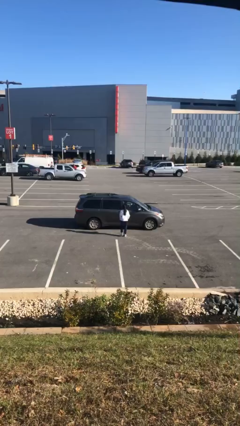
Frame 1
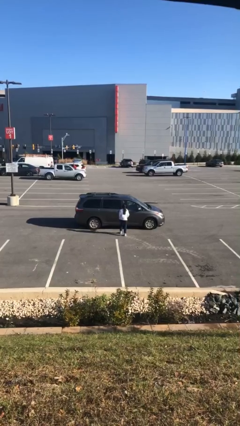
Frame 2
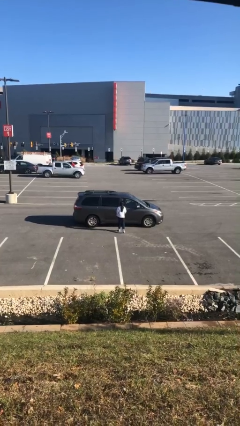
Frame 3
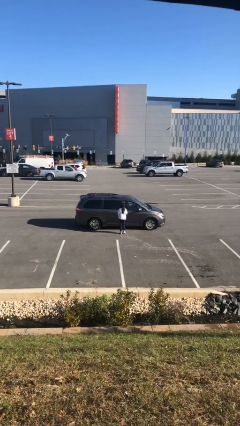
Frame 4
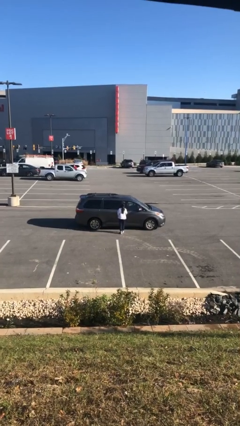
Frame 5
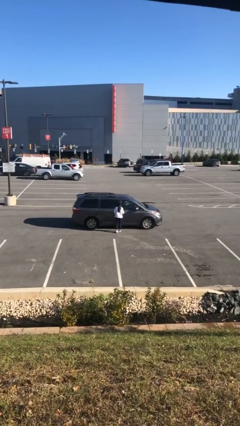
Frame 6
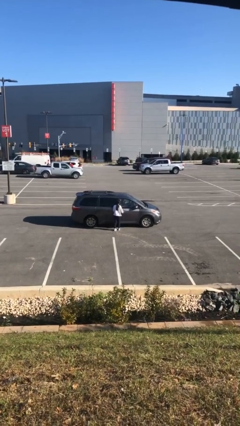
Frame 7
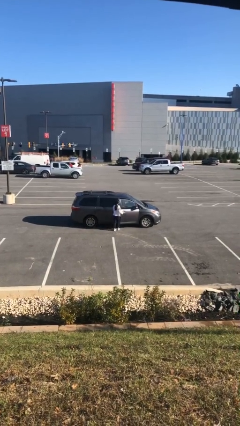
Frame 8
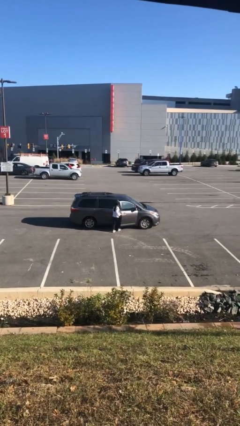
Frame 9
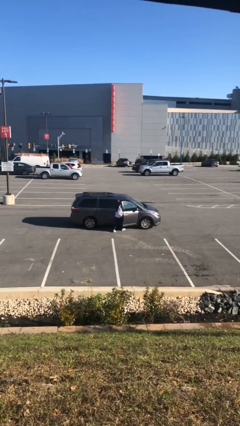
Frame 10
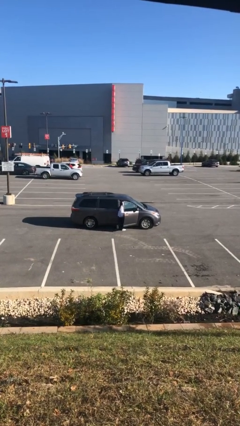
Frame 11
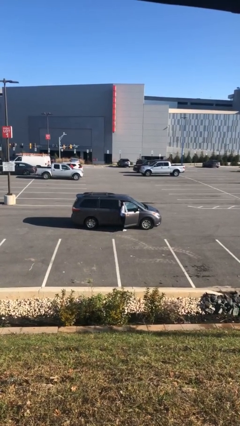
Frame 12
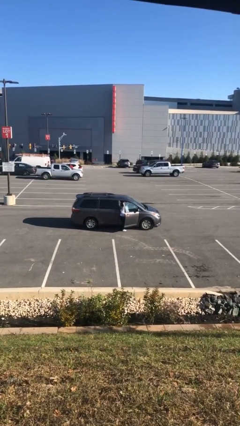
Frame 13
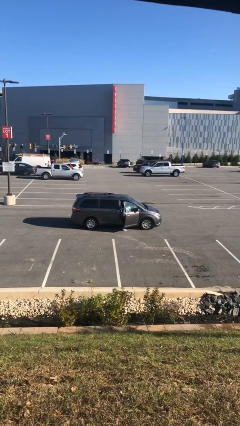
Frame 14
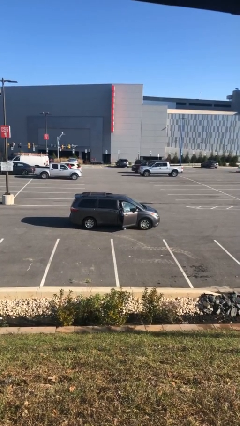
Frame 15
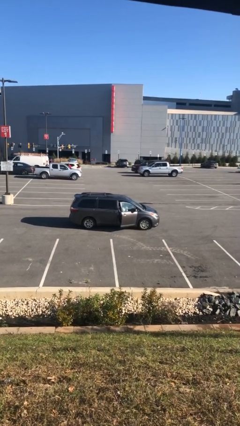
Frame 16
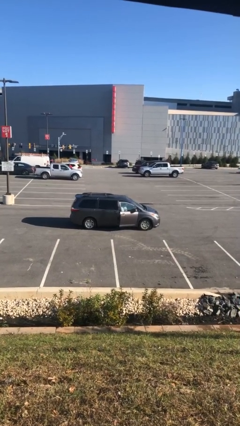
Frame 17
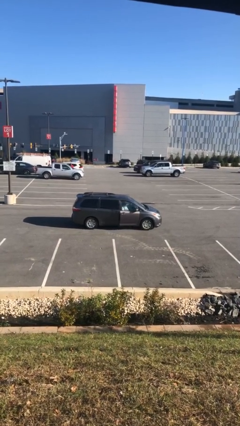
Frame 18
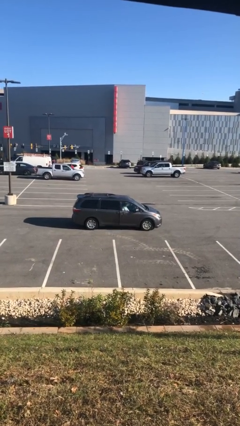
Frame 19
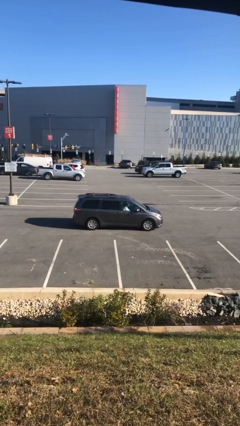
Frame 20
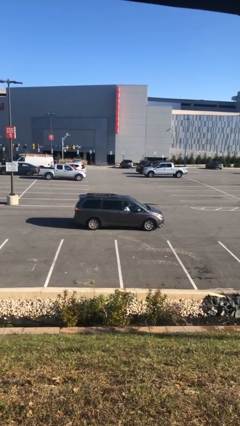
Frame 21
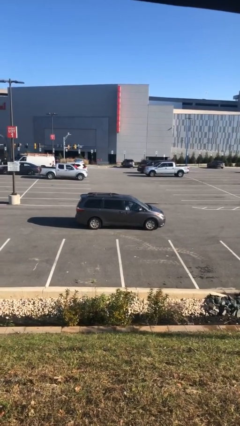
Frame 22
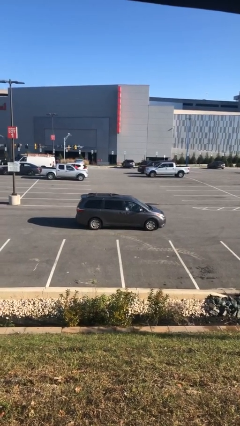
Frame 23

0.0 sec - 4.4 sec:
car picks up person

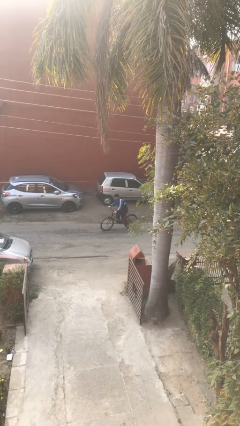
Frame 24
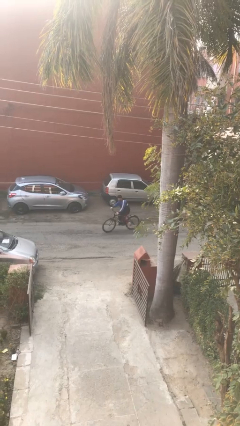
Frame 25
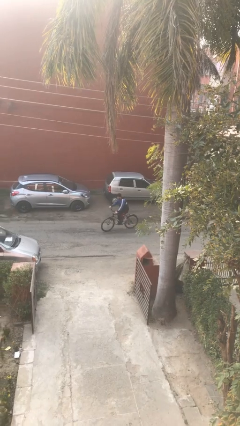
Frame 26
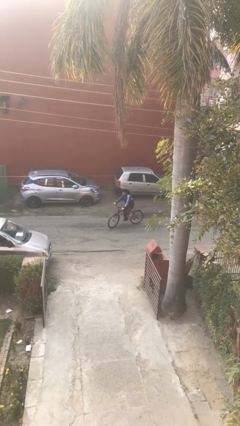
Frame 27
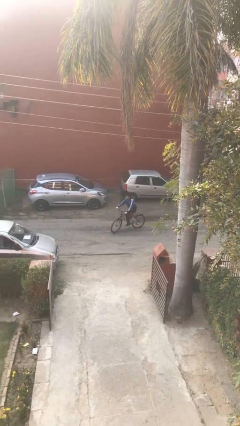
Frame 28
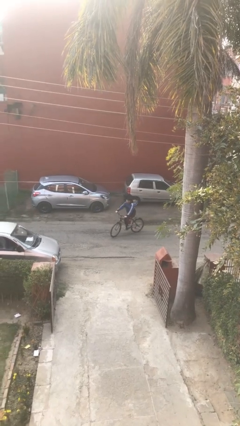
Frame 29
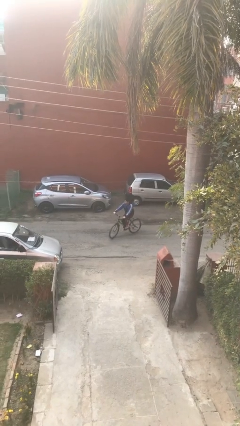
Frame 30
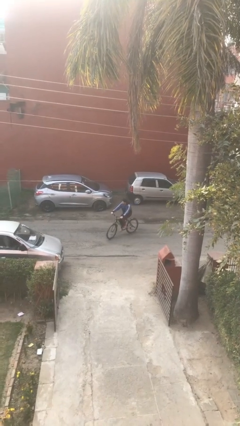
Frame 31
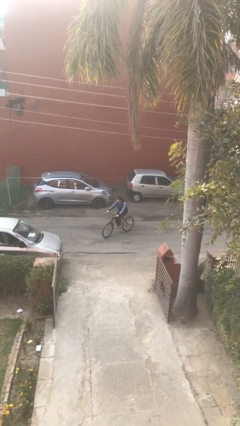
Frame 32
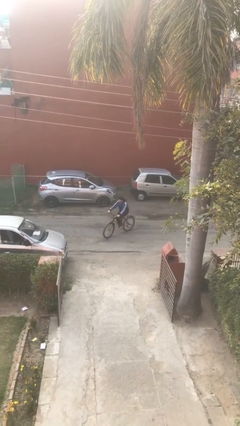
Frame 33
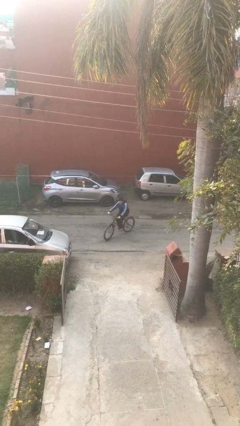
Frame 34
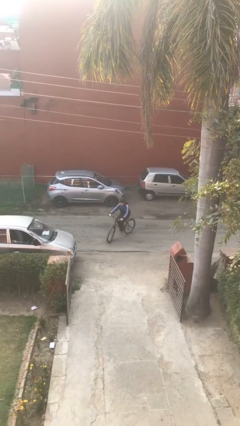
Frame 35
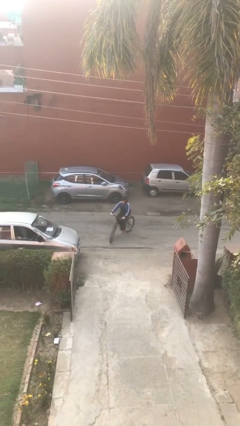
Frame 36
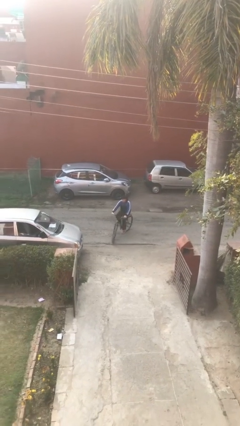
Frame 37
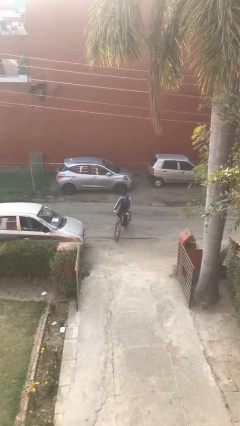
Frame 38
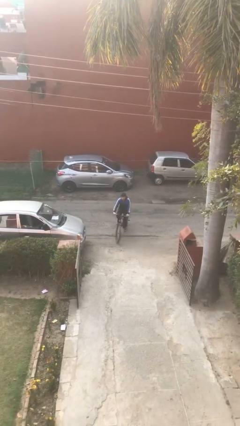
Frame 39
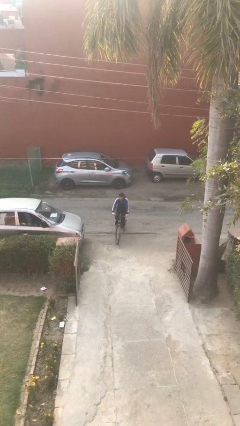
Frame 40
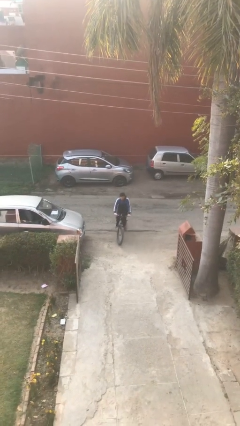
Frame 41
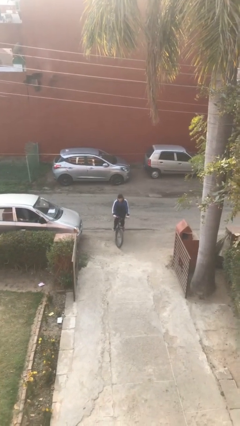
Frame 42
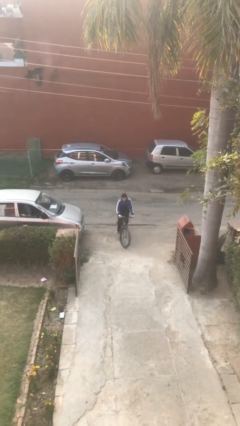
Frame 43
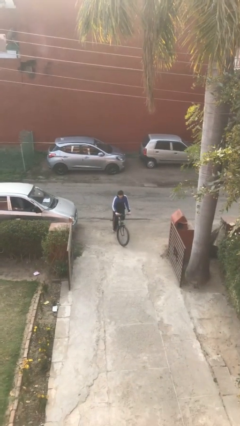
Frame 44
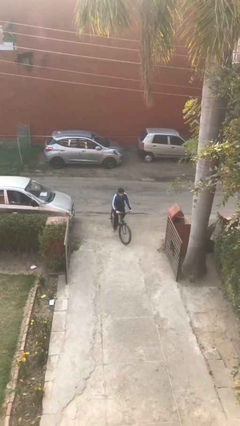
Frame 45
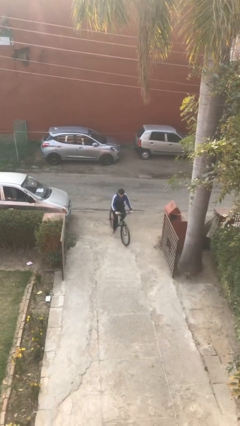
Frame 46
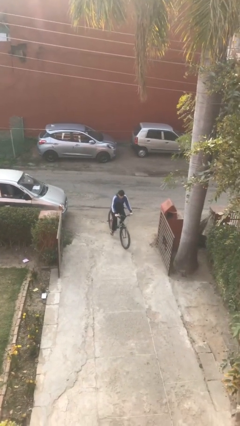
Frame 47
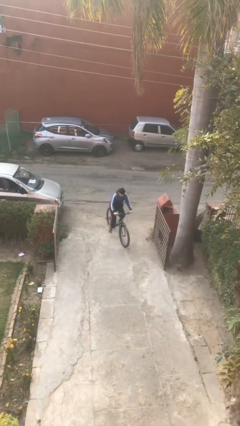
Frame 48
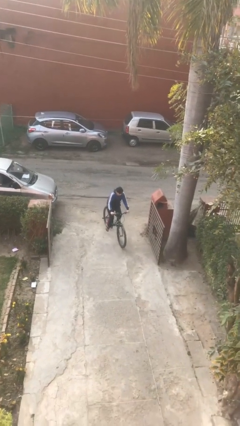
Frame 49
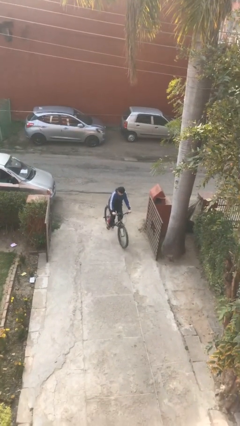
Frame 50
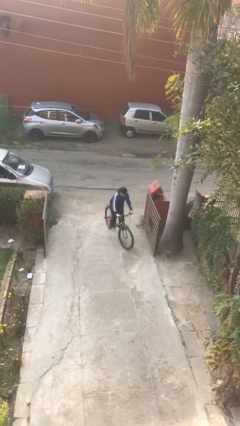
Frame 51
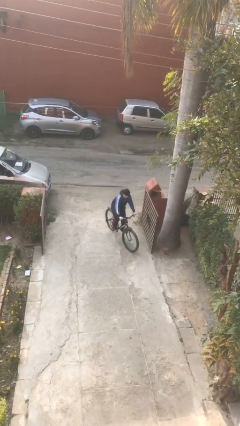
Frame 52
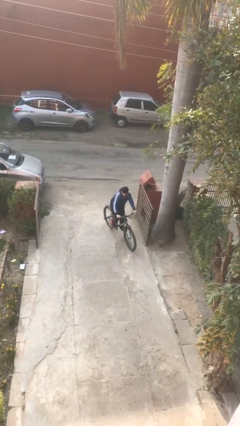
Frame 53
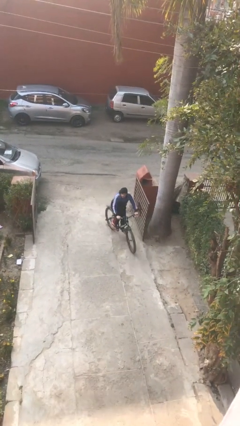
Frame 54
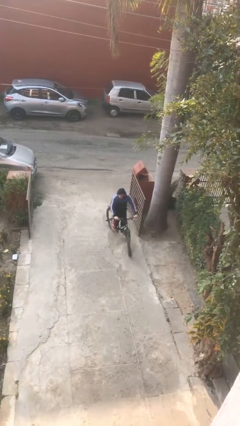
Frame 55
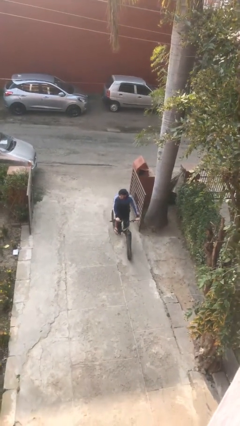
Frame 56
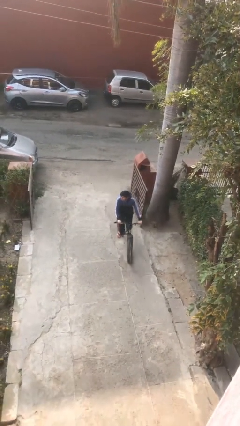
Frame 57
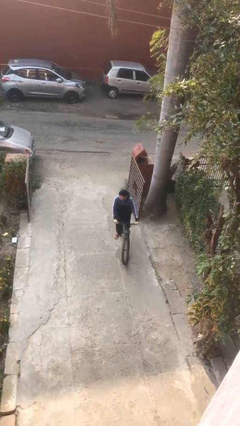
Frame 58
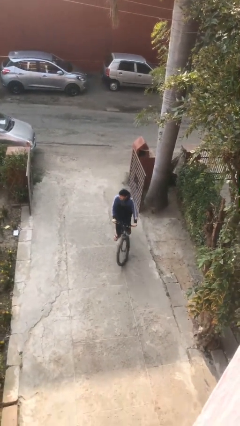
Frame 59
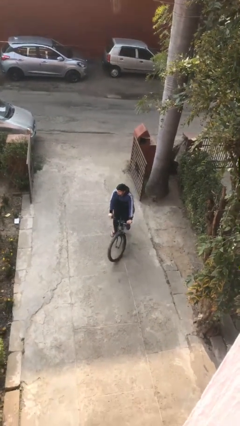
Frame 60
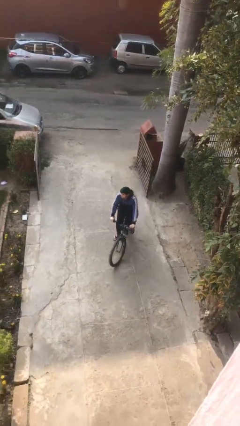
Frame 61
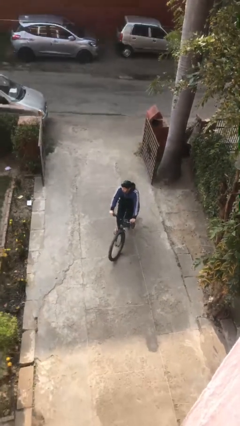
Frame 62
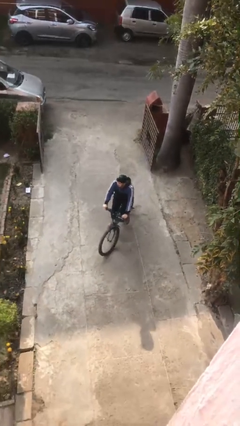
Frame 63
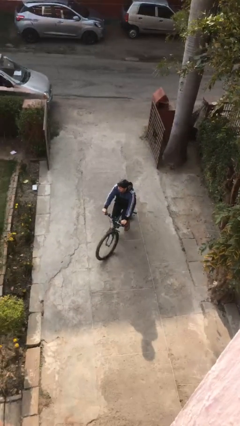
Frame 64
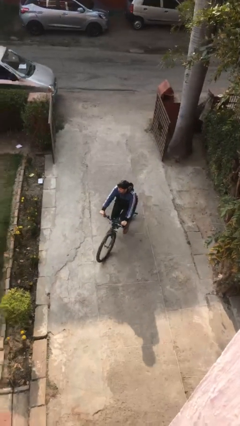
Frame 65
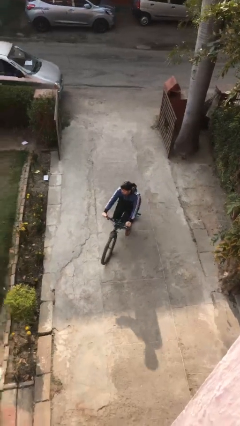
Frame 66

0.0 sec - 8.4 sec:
person rides bicycle

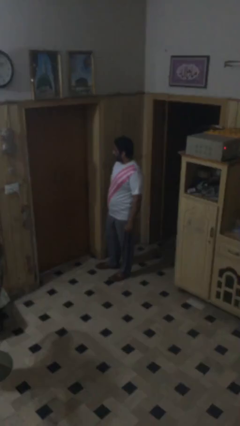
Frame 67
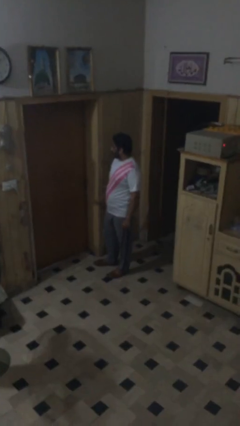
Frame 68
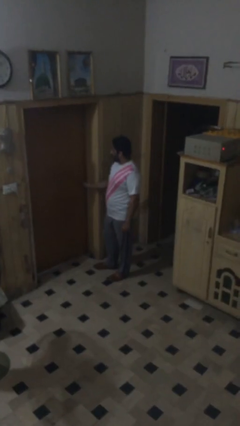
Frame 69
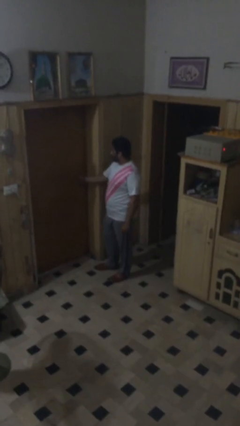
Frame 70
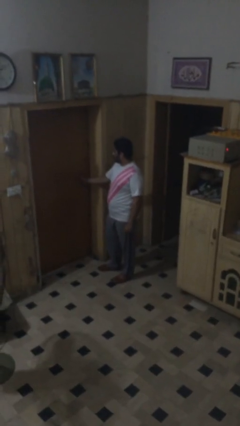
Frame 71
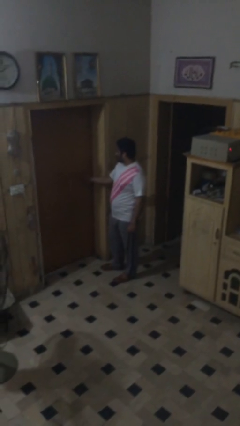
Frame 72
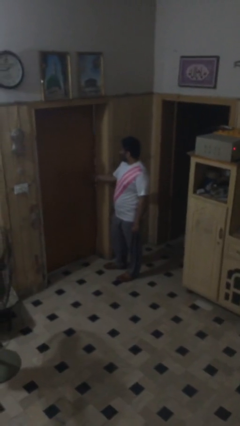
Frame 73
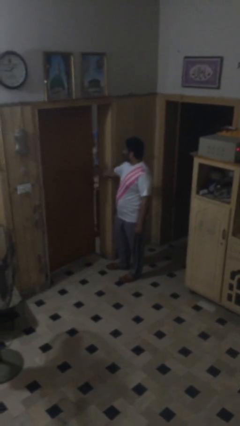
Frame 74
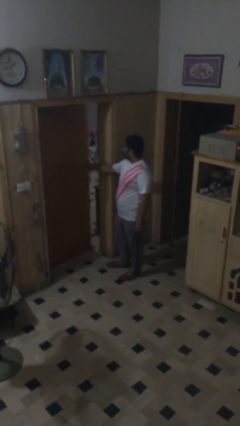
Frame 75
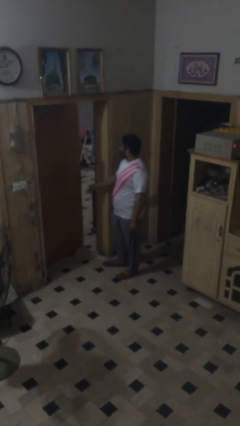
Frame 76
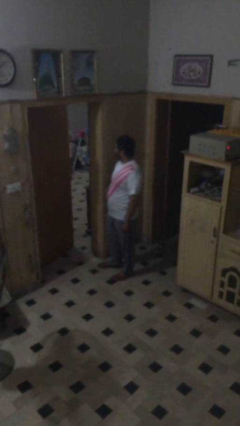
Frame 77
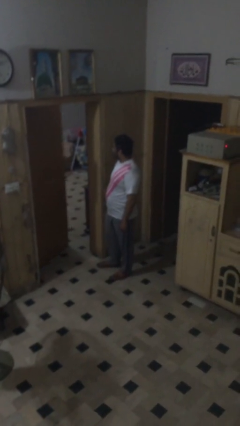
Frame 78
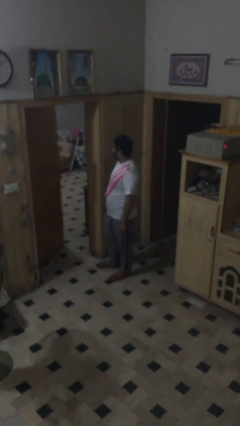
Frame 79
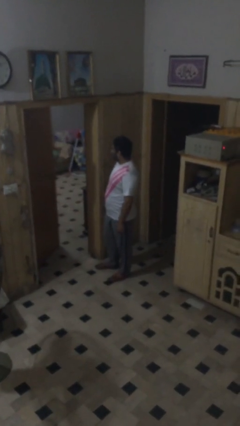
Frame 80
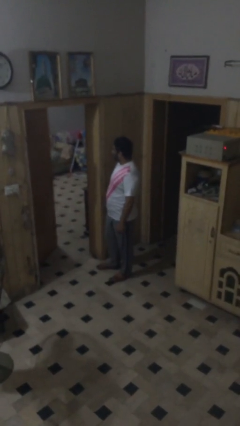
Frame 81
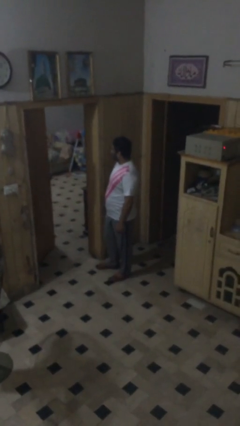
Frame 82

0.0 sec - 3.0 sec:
person opens facility door

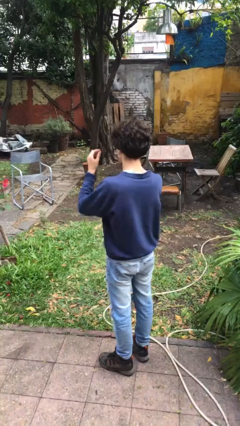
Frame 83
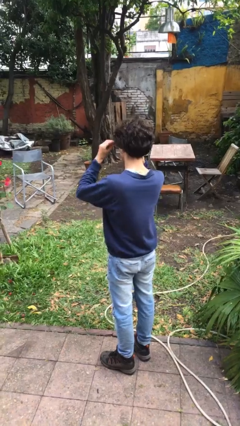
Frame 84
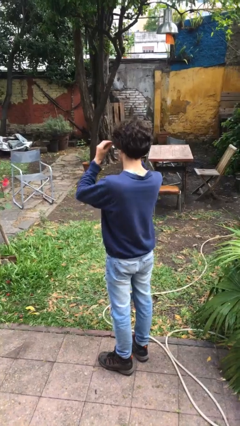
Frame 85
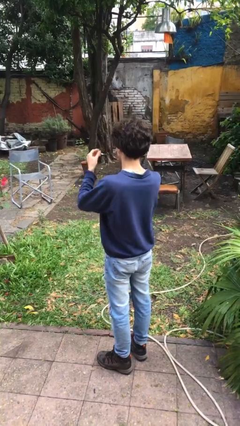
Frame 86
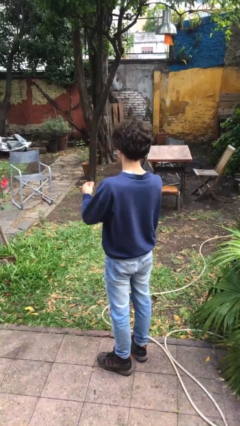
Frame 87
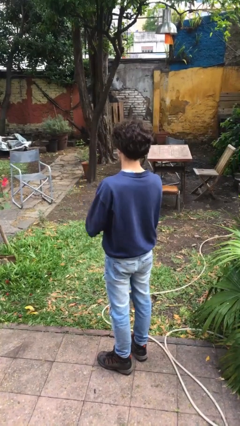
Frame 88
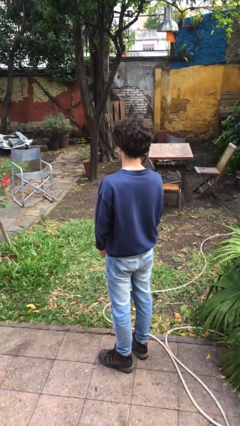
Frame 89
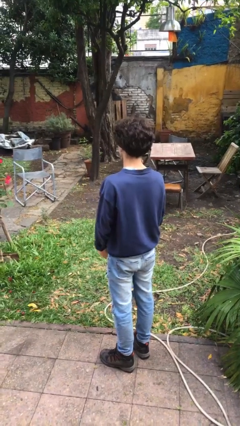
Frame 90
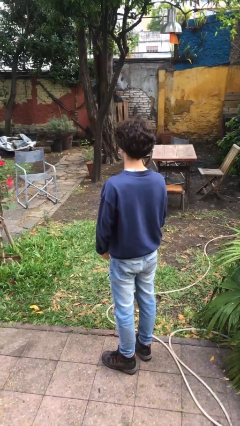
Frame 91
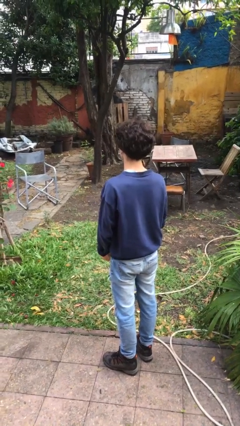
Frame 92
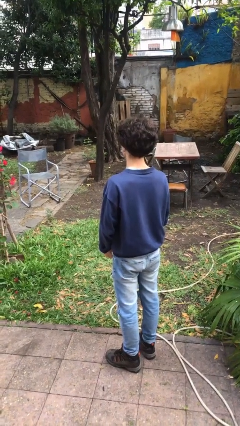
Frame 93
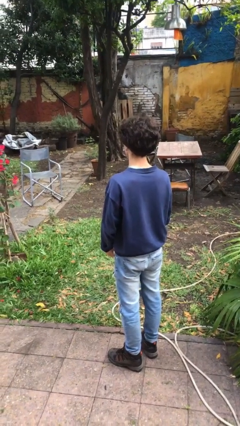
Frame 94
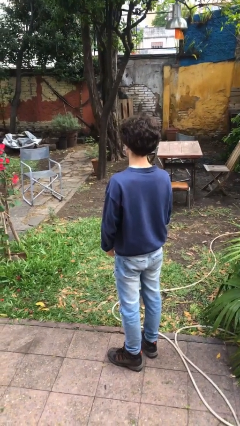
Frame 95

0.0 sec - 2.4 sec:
person takes off glasses
